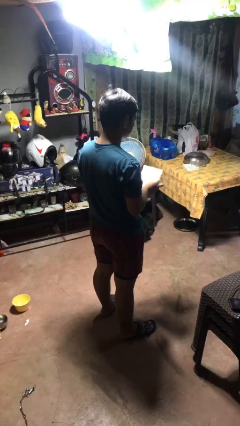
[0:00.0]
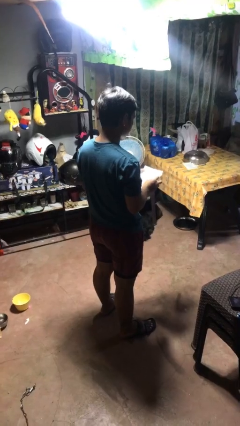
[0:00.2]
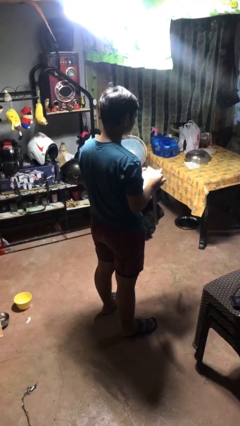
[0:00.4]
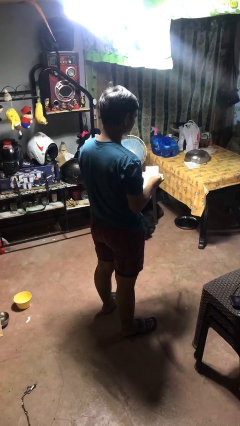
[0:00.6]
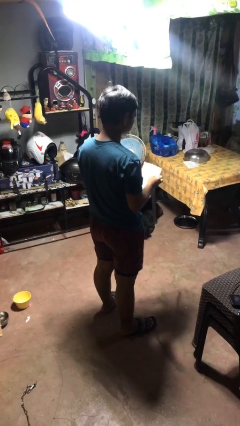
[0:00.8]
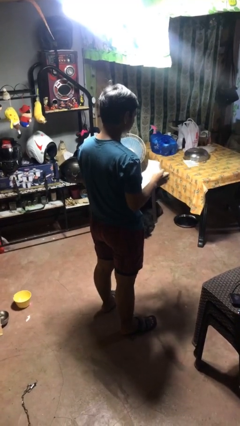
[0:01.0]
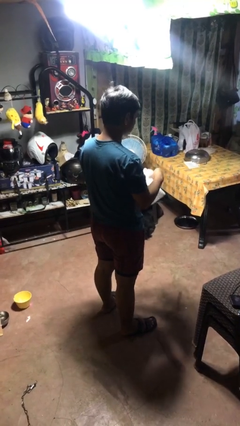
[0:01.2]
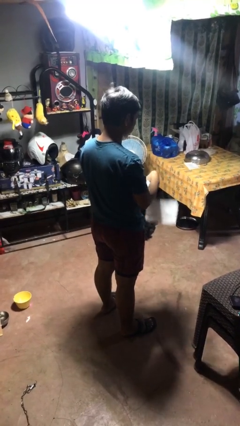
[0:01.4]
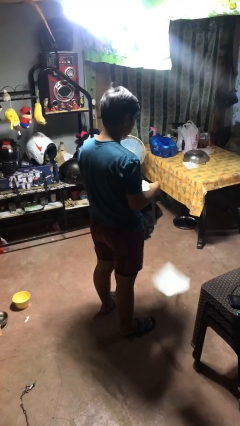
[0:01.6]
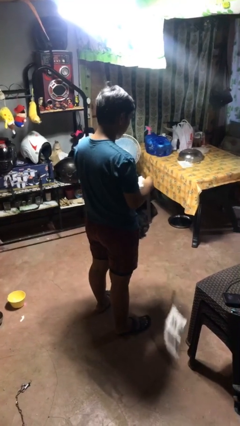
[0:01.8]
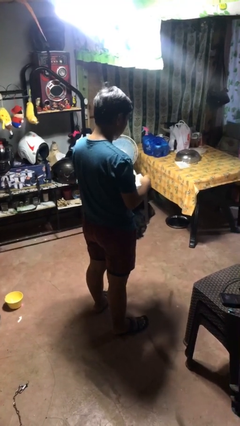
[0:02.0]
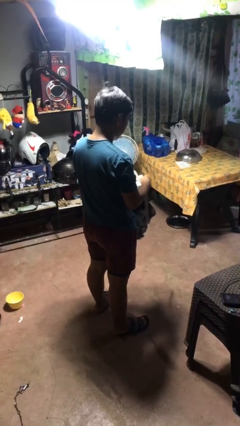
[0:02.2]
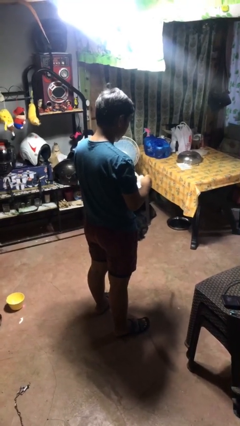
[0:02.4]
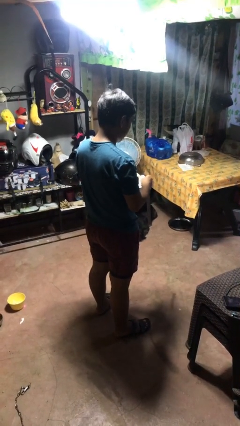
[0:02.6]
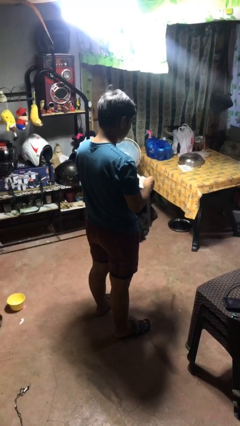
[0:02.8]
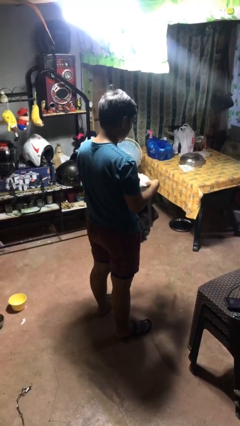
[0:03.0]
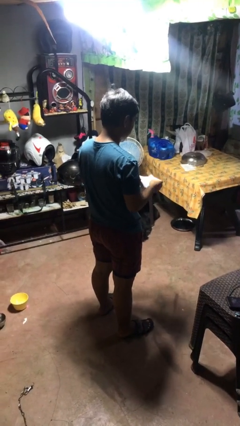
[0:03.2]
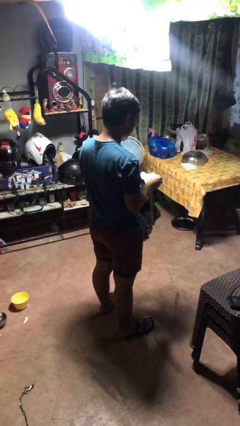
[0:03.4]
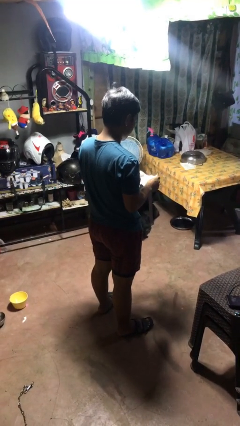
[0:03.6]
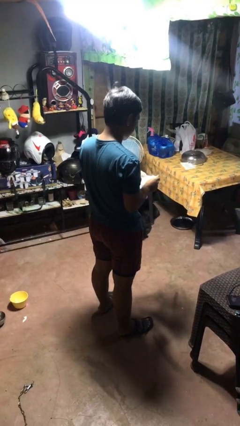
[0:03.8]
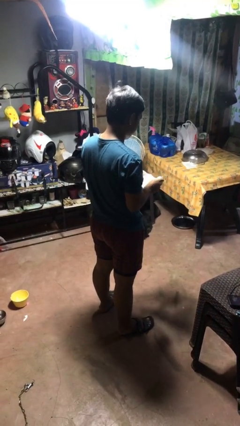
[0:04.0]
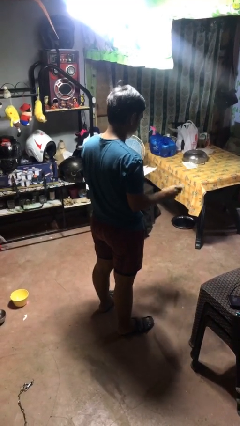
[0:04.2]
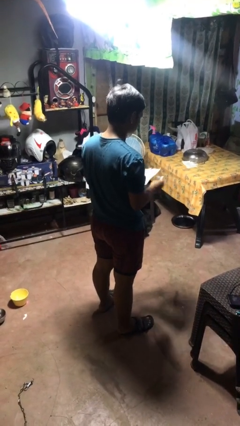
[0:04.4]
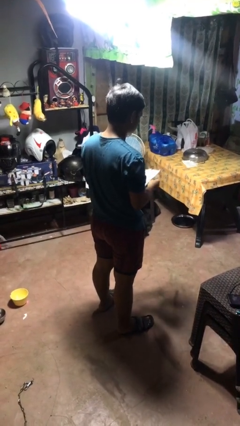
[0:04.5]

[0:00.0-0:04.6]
person tears paper

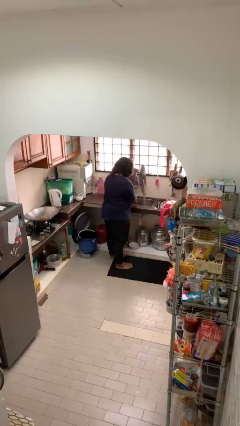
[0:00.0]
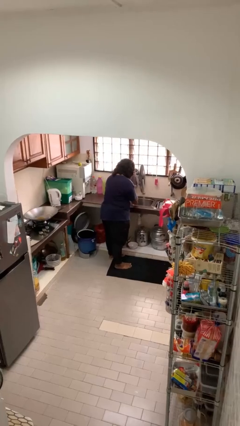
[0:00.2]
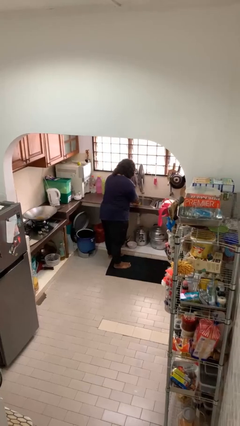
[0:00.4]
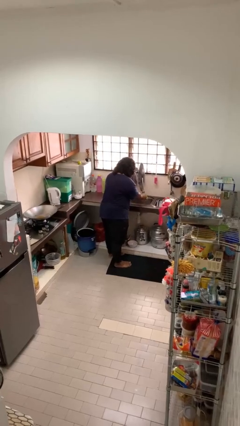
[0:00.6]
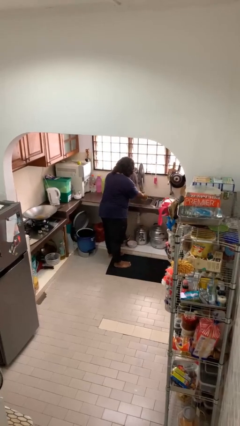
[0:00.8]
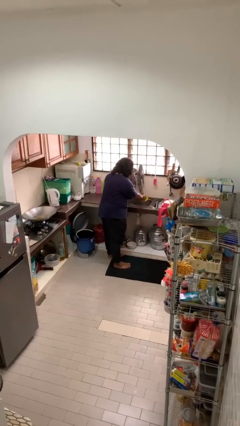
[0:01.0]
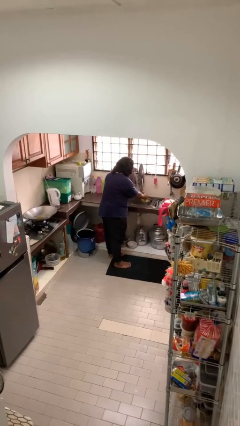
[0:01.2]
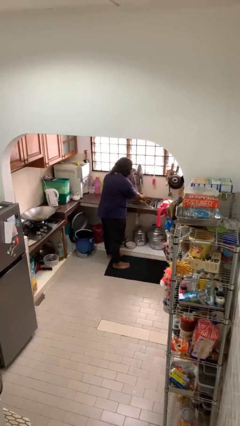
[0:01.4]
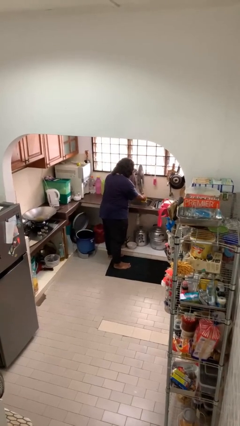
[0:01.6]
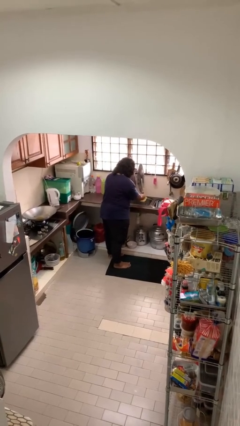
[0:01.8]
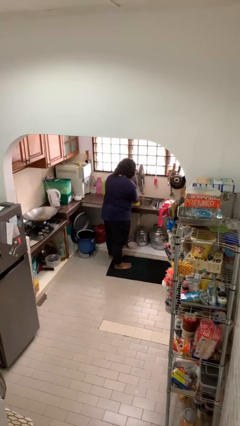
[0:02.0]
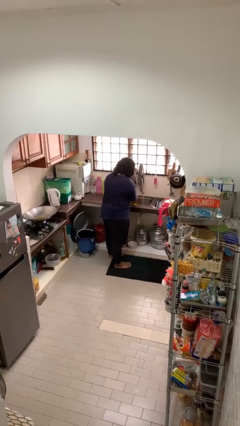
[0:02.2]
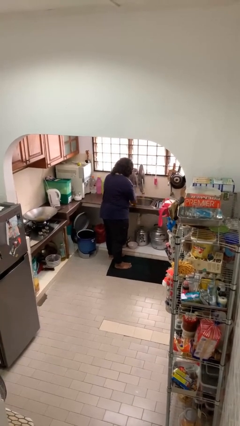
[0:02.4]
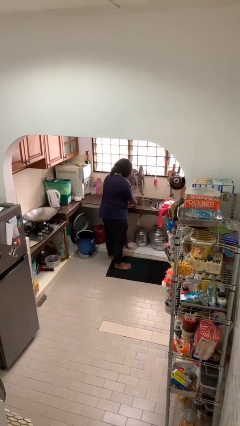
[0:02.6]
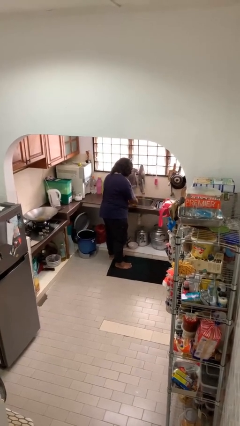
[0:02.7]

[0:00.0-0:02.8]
person washes dish

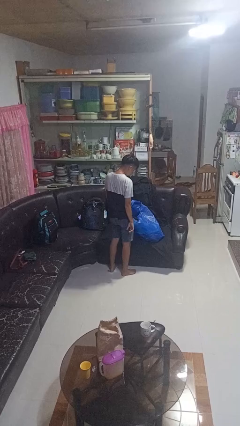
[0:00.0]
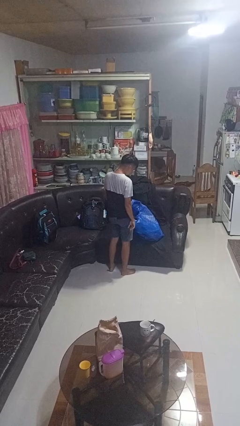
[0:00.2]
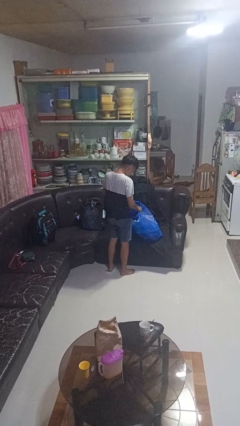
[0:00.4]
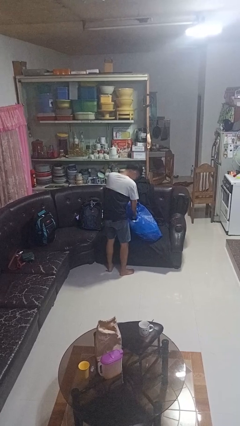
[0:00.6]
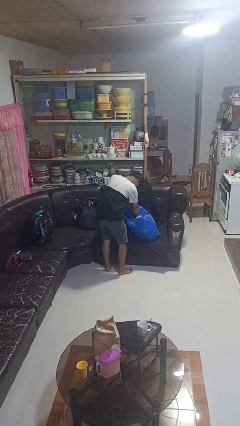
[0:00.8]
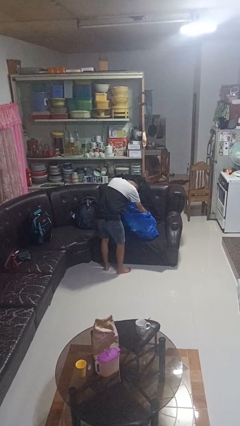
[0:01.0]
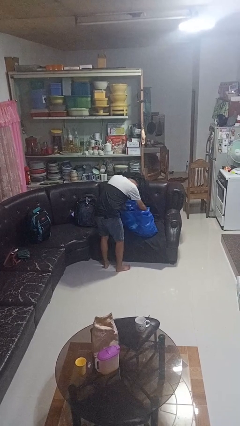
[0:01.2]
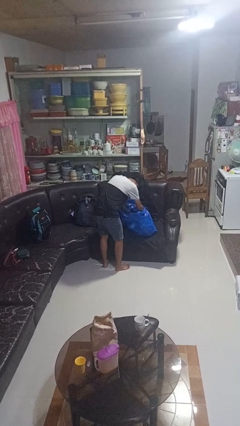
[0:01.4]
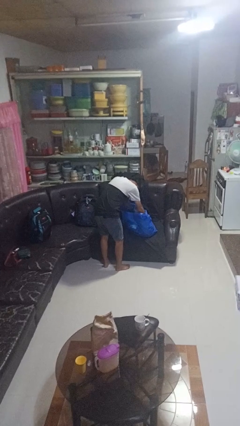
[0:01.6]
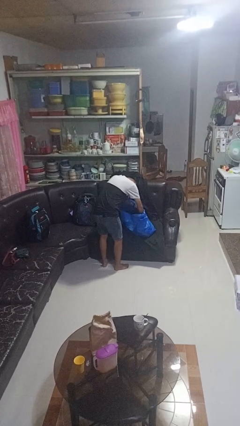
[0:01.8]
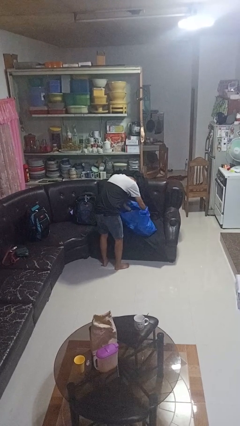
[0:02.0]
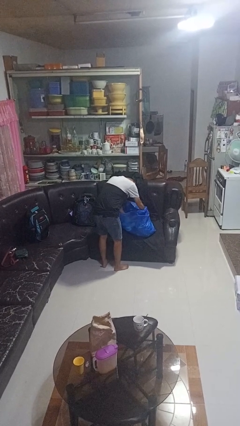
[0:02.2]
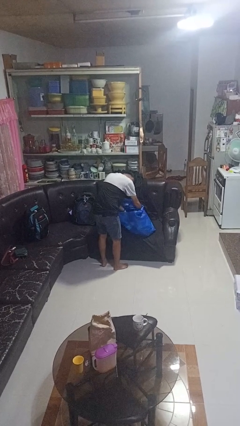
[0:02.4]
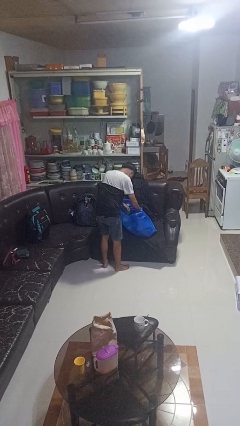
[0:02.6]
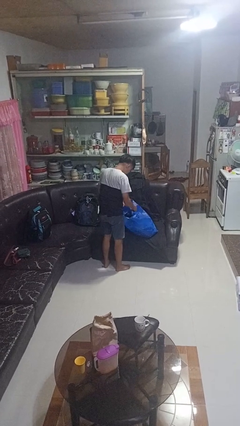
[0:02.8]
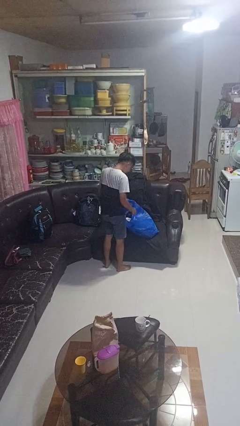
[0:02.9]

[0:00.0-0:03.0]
person searches in bag

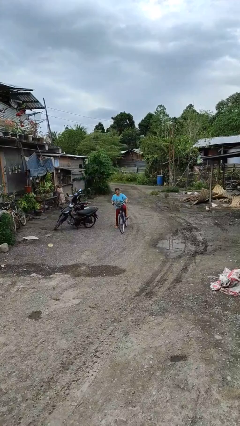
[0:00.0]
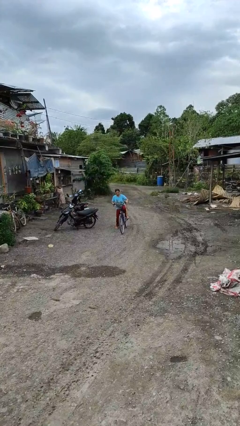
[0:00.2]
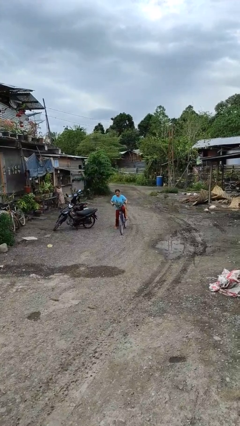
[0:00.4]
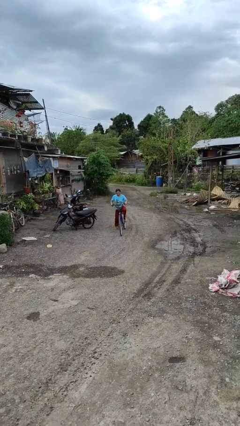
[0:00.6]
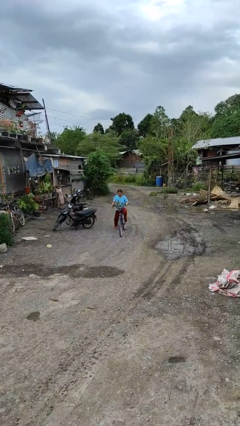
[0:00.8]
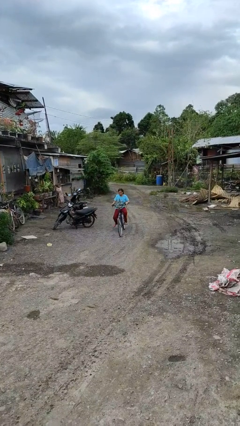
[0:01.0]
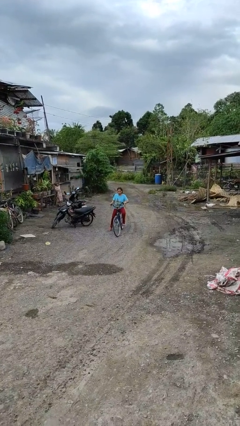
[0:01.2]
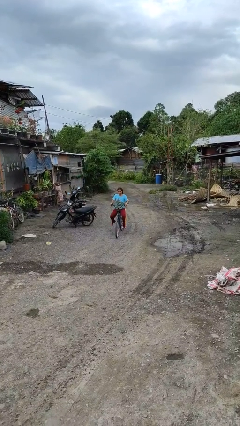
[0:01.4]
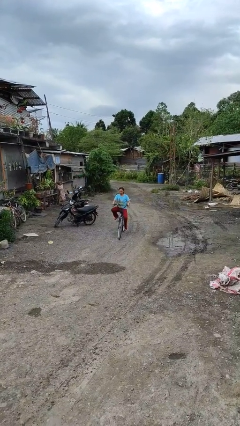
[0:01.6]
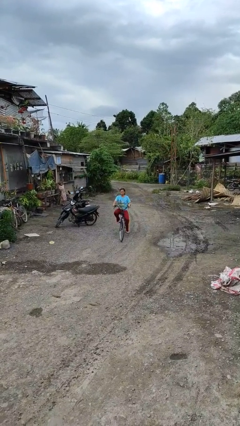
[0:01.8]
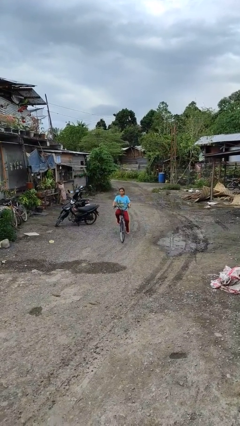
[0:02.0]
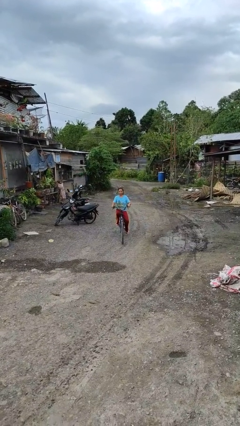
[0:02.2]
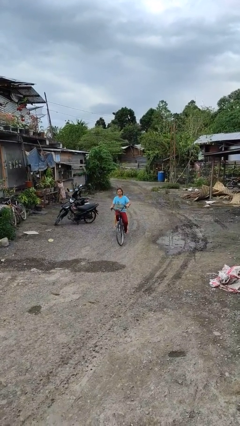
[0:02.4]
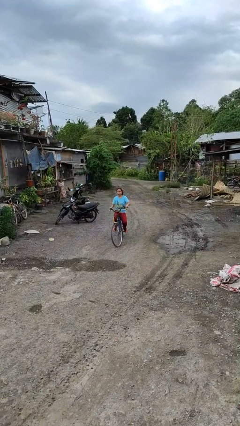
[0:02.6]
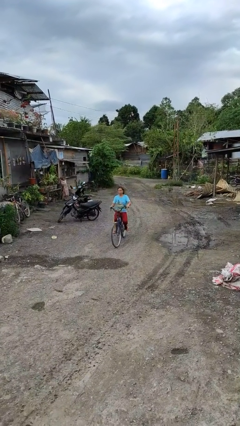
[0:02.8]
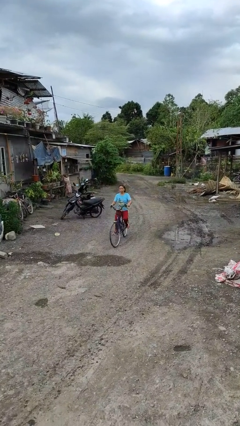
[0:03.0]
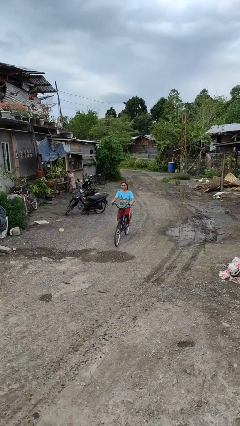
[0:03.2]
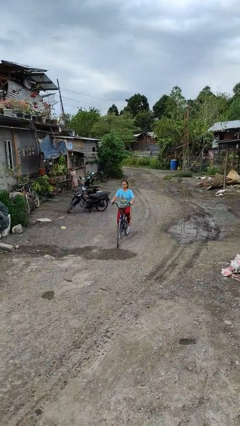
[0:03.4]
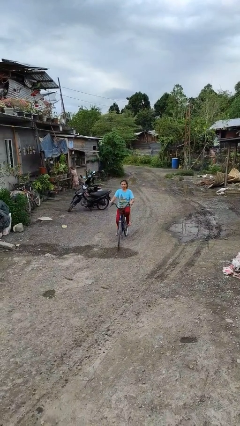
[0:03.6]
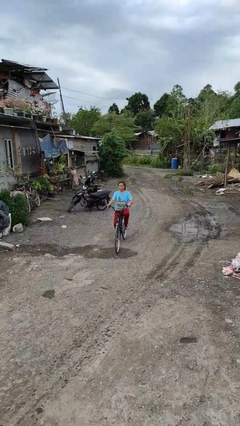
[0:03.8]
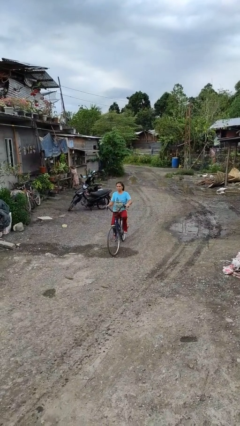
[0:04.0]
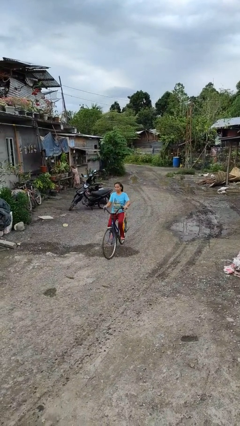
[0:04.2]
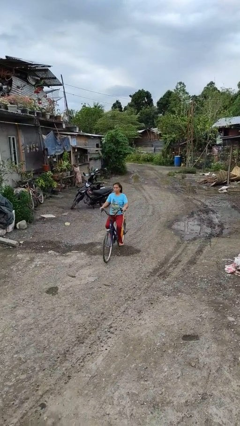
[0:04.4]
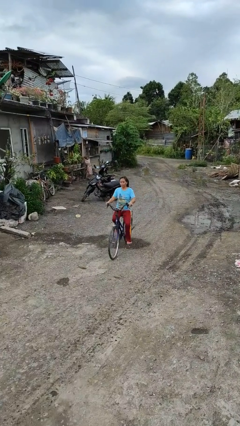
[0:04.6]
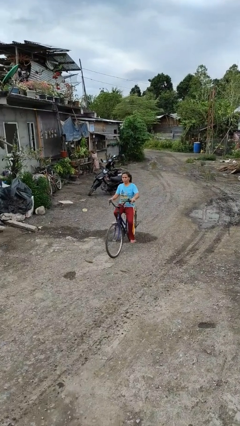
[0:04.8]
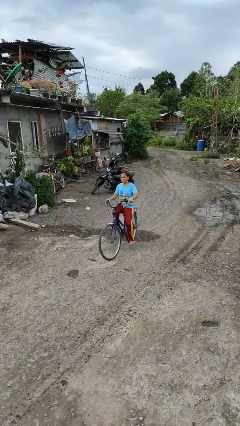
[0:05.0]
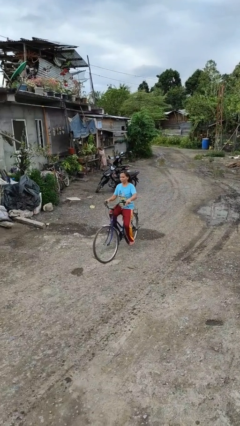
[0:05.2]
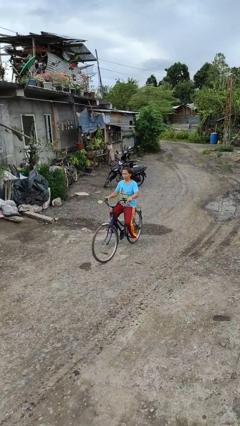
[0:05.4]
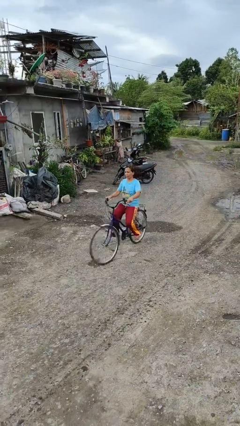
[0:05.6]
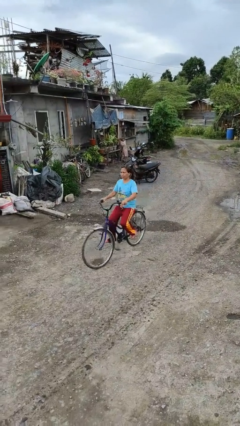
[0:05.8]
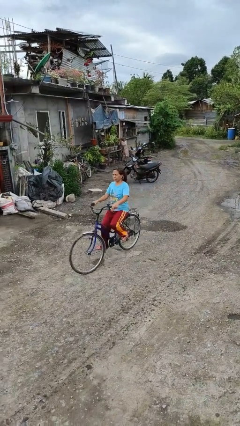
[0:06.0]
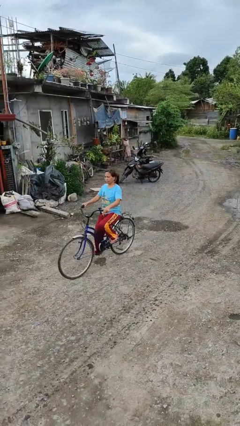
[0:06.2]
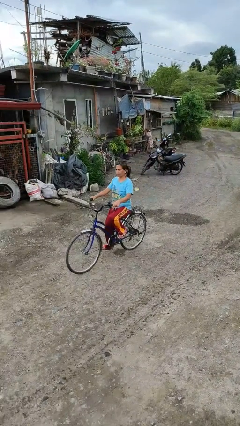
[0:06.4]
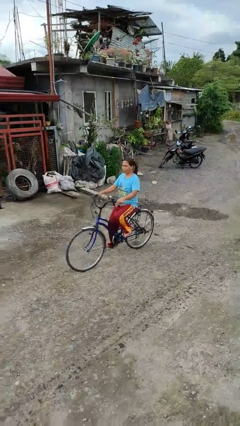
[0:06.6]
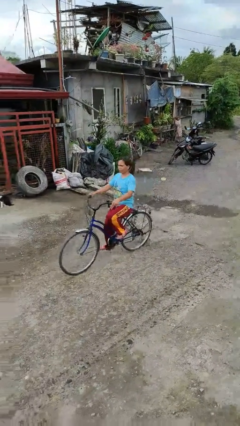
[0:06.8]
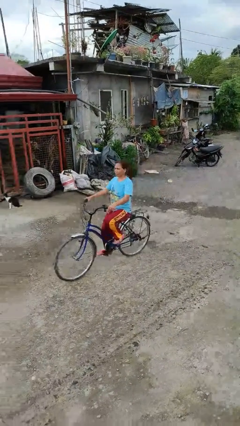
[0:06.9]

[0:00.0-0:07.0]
person rides bicycle

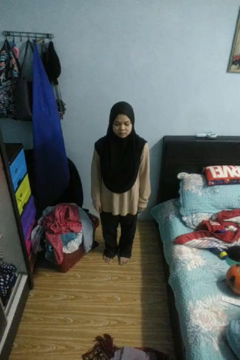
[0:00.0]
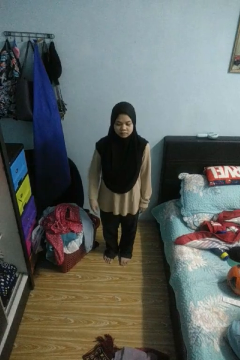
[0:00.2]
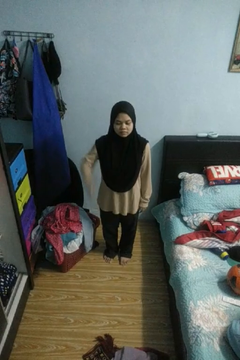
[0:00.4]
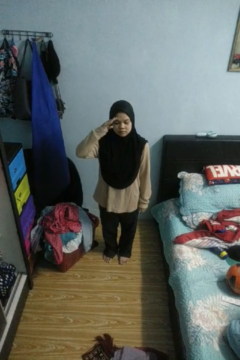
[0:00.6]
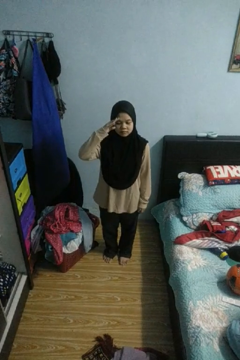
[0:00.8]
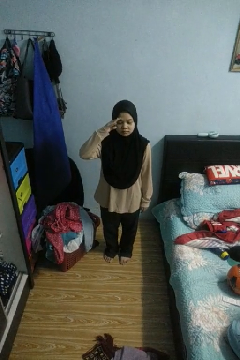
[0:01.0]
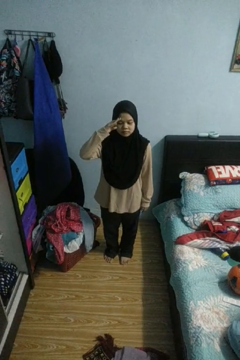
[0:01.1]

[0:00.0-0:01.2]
person salutes
